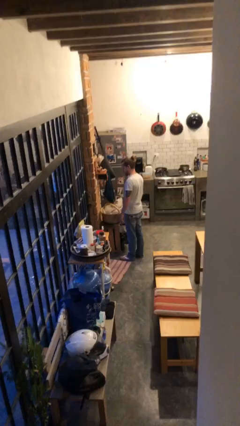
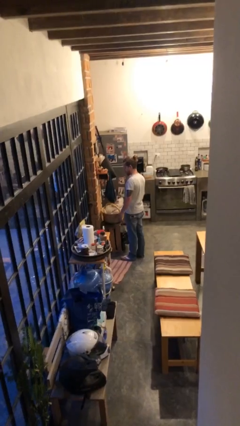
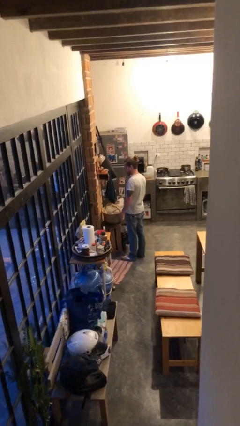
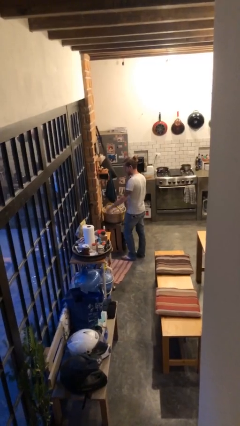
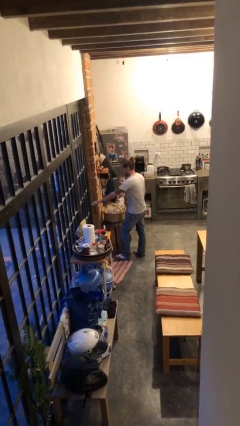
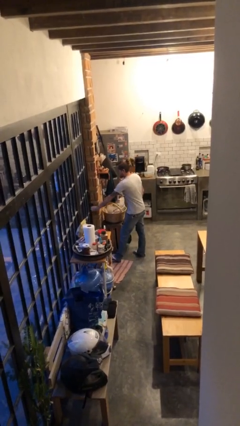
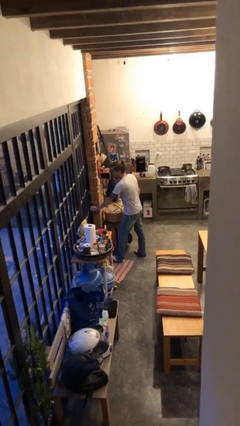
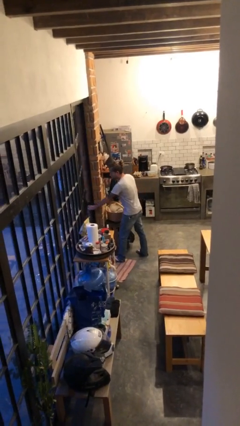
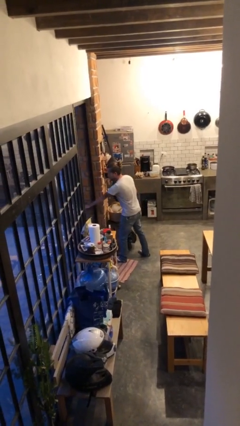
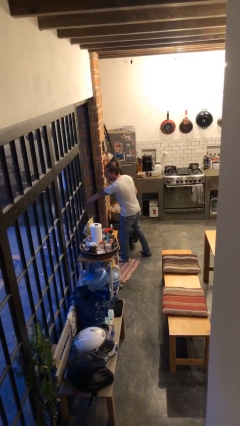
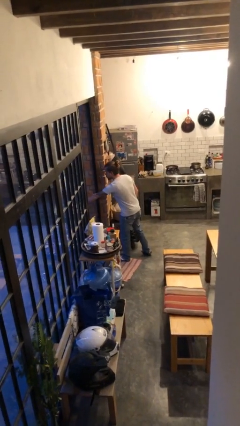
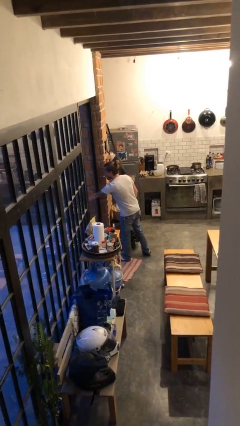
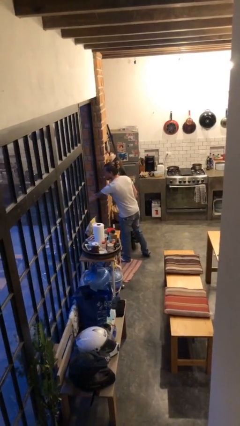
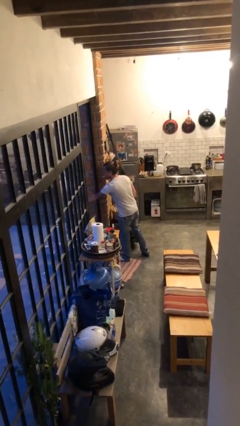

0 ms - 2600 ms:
person opens facility door

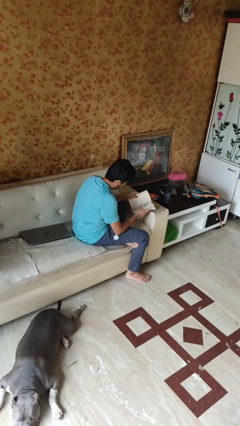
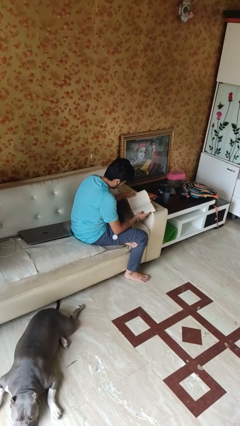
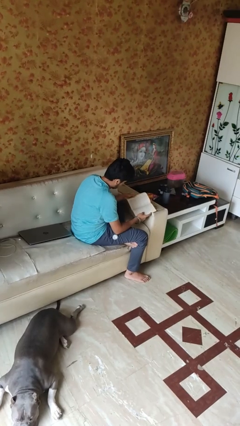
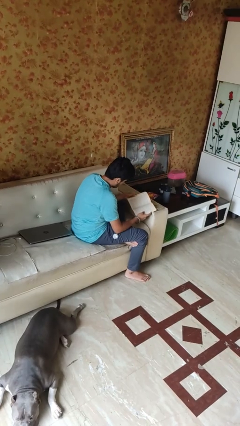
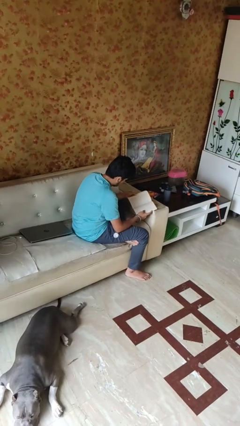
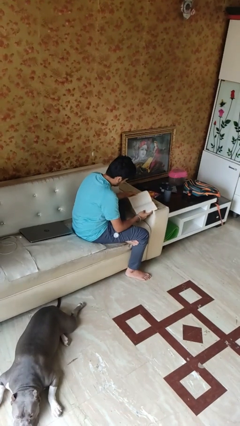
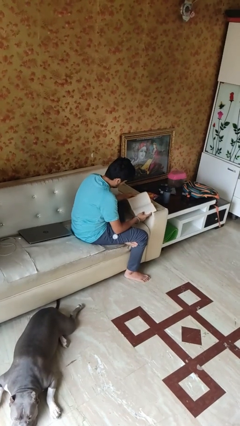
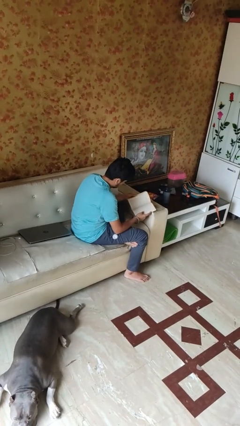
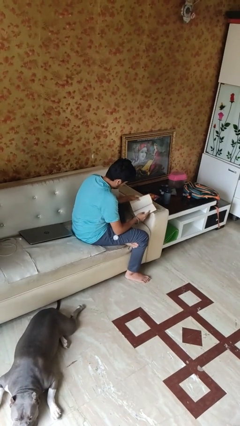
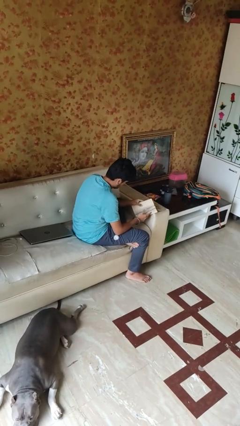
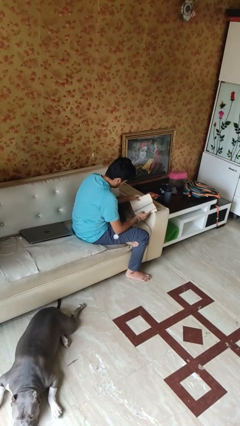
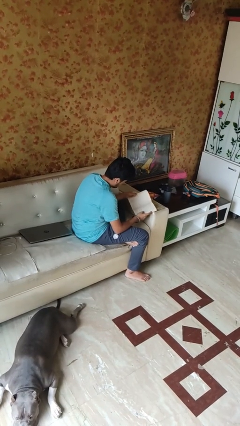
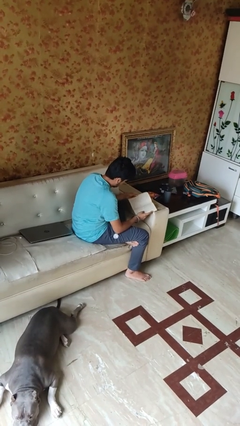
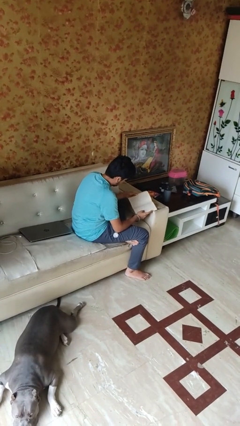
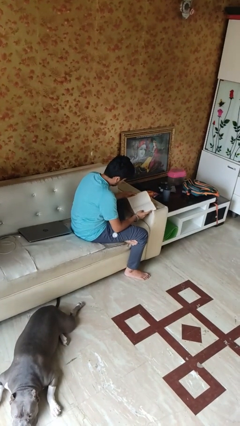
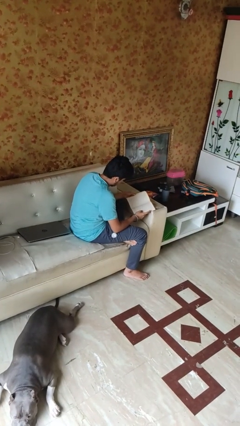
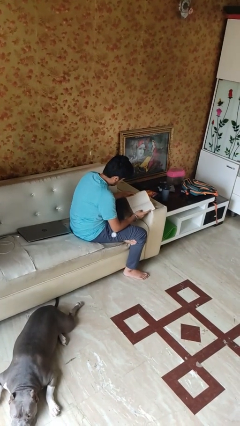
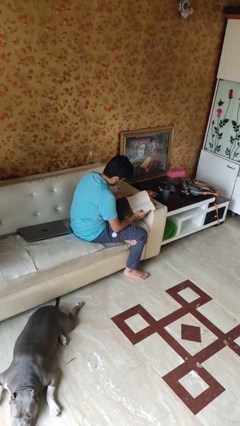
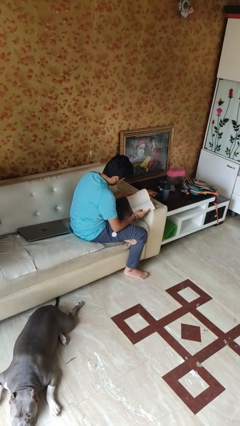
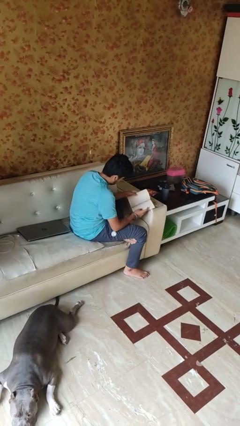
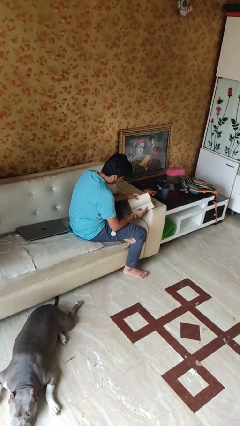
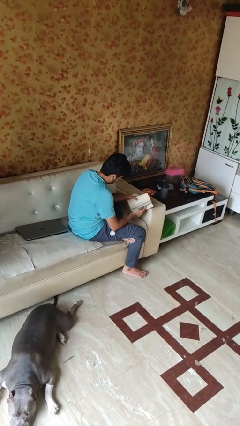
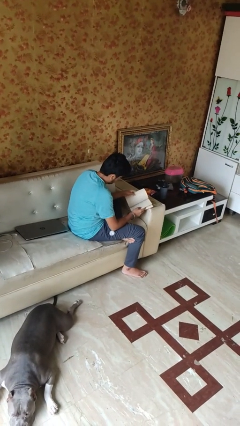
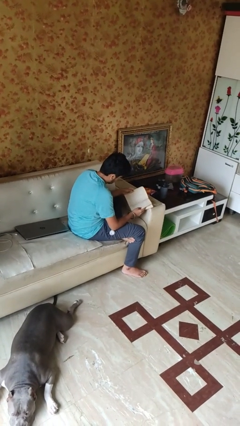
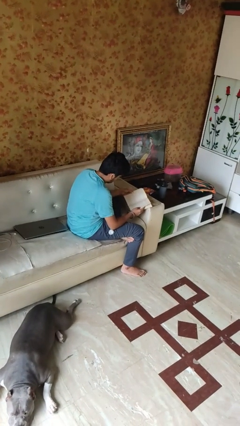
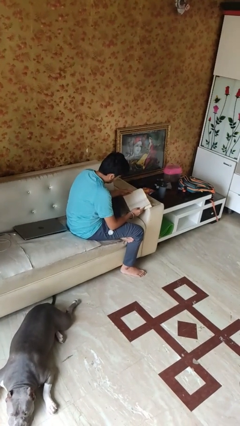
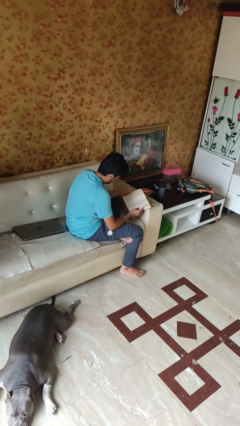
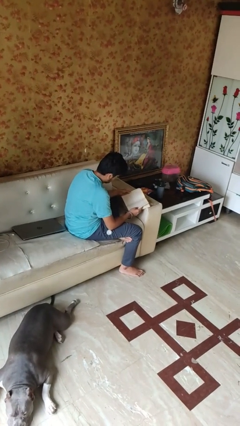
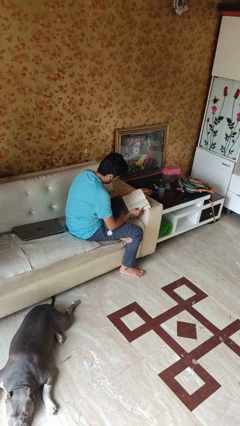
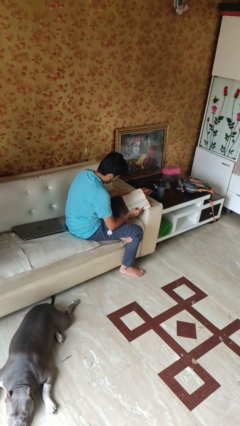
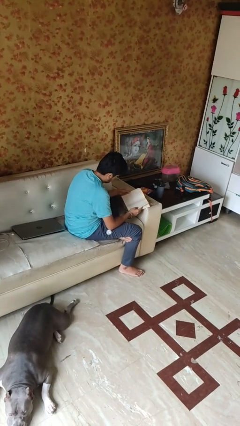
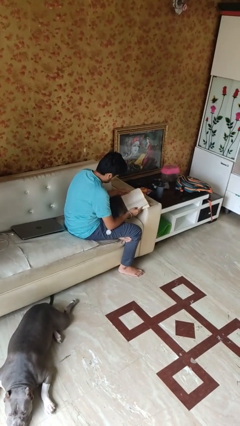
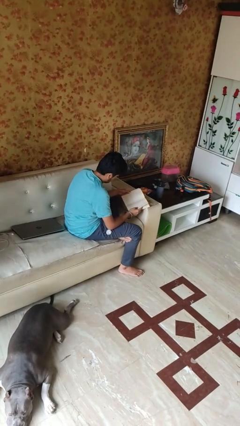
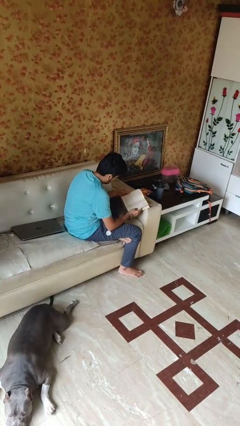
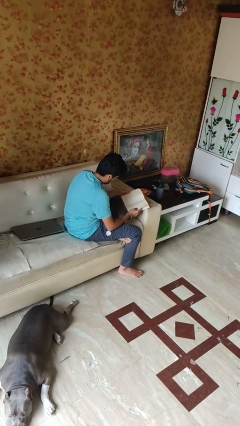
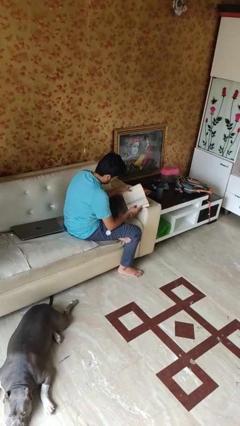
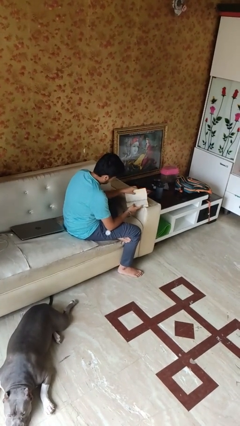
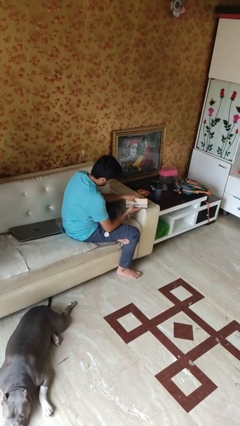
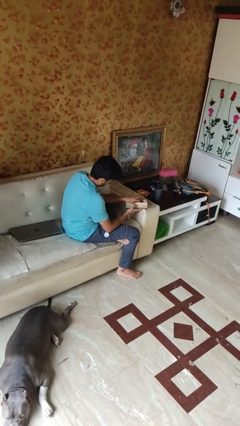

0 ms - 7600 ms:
person reads book

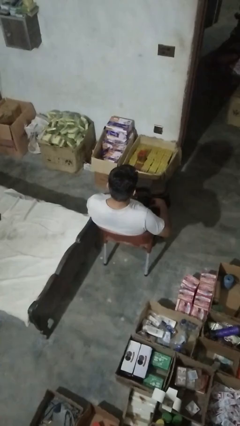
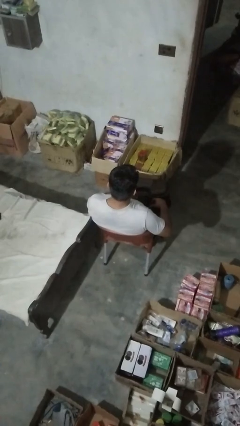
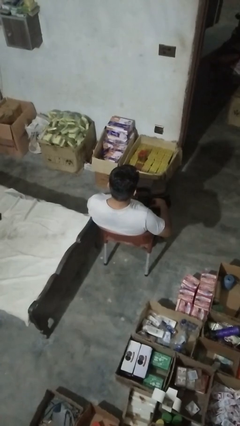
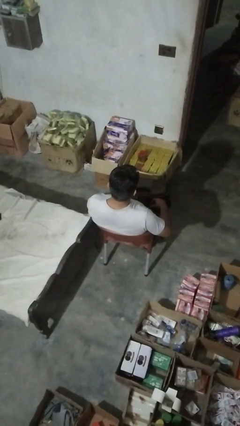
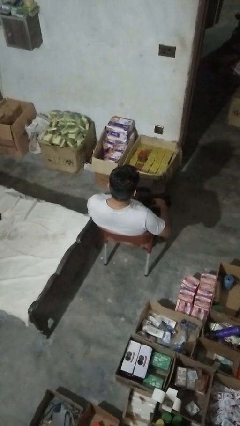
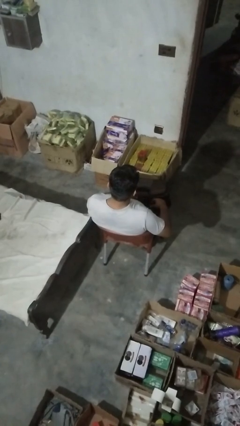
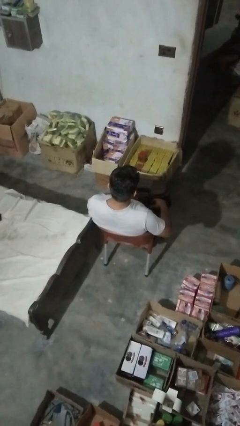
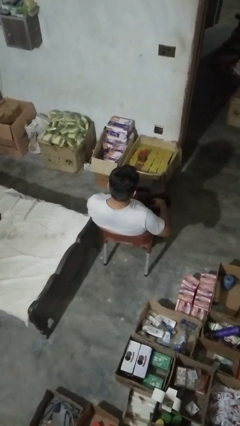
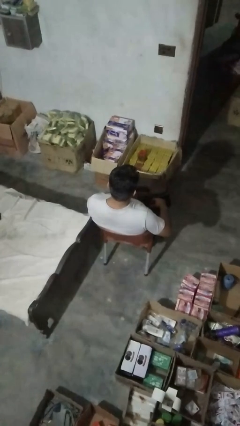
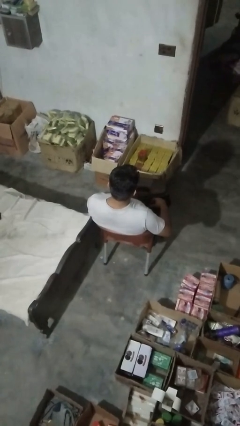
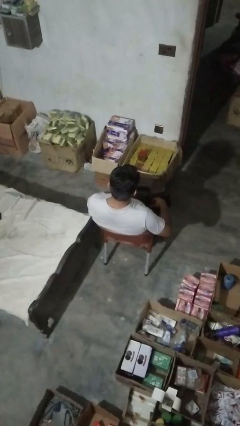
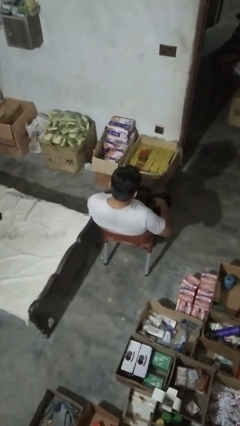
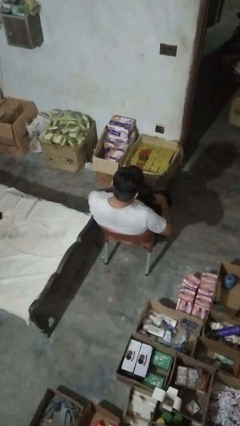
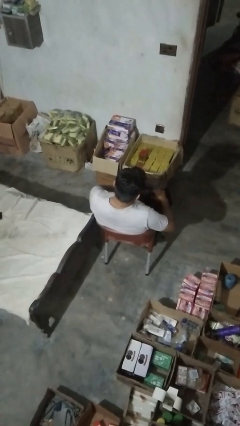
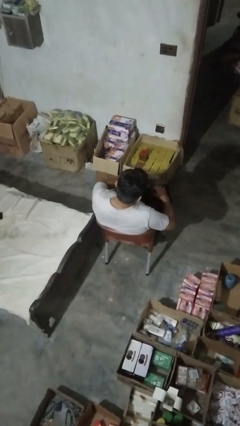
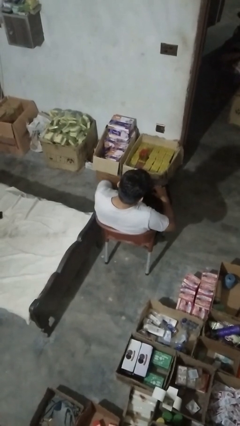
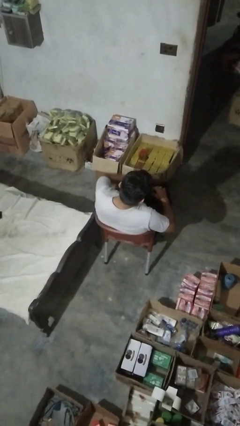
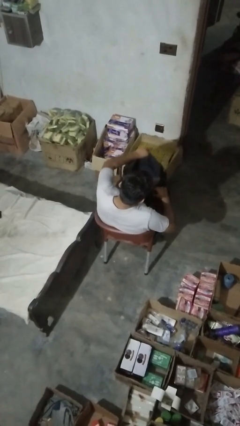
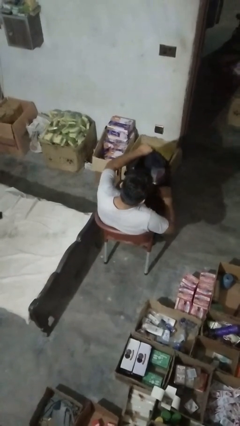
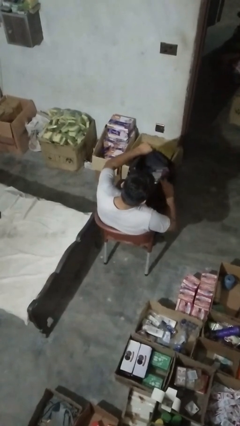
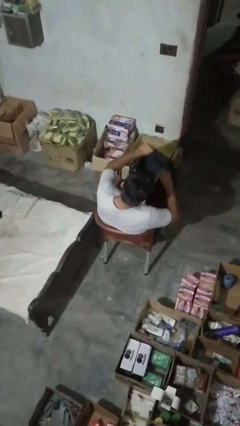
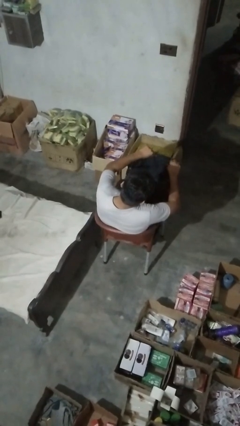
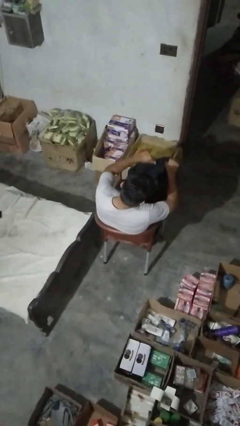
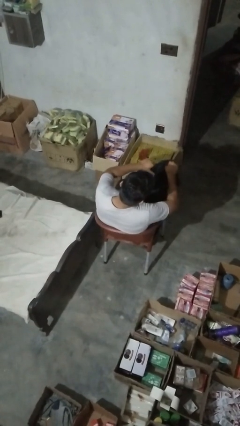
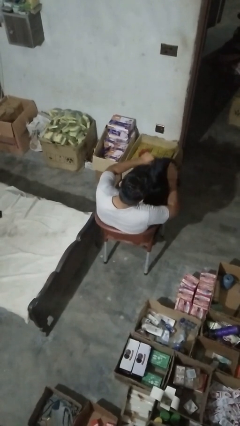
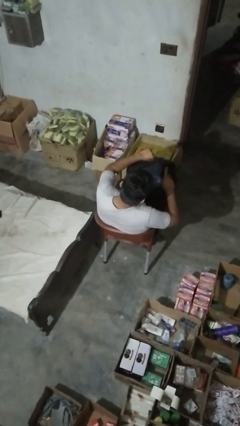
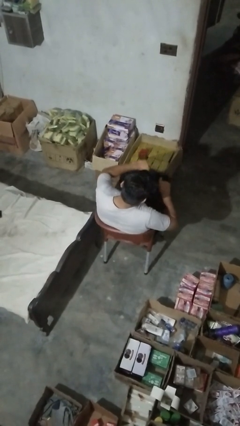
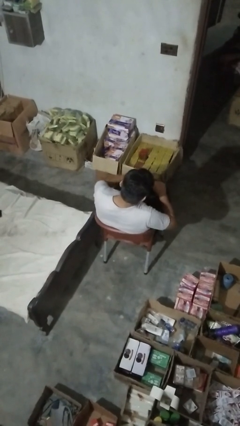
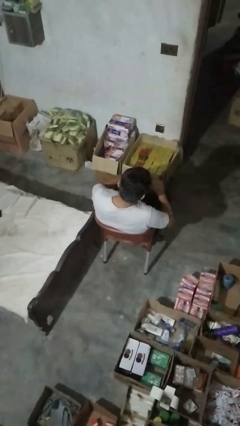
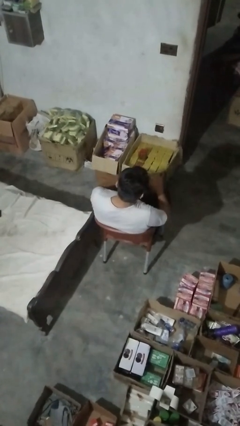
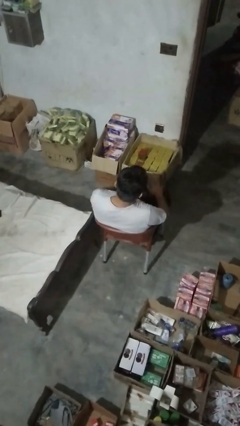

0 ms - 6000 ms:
person searches in bag

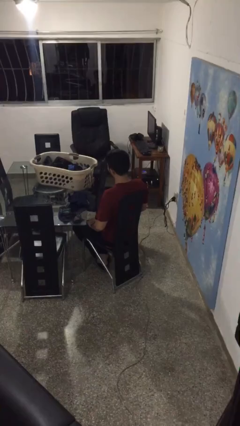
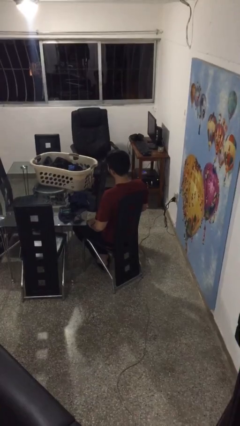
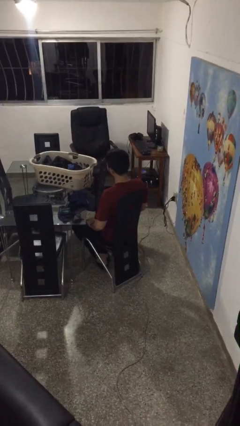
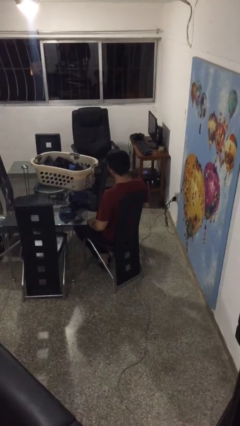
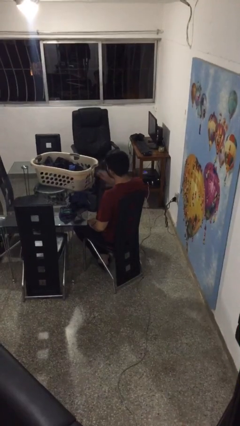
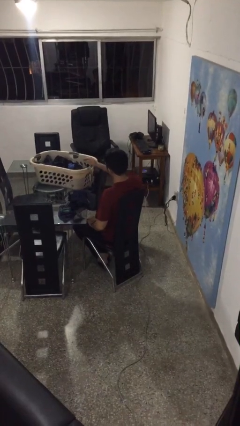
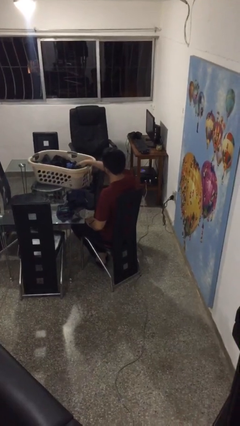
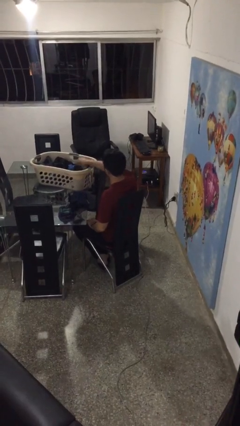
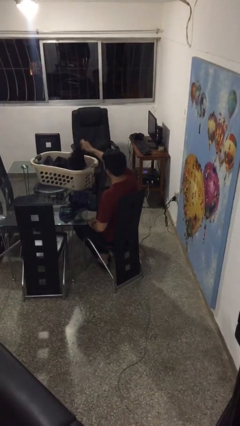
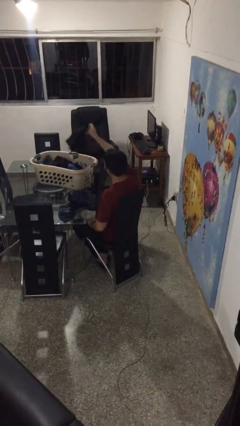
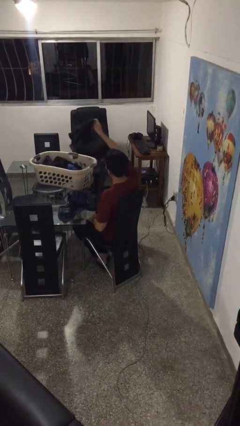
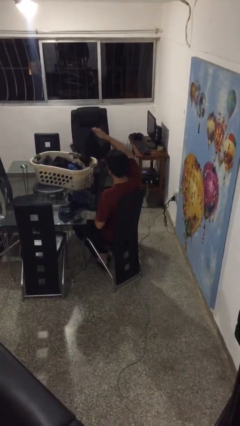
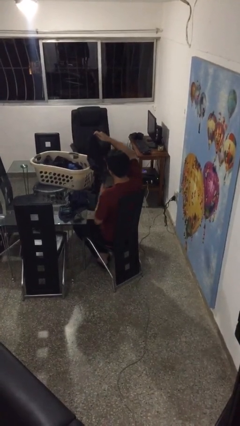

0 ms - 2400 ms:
person folds shirt
